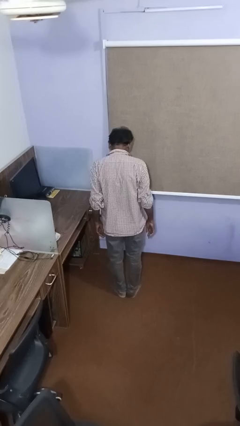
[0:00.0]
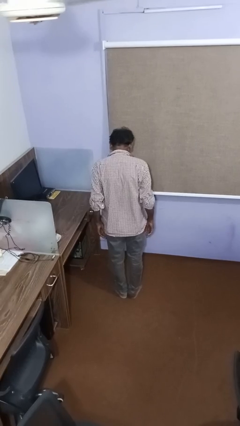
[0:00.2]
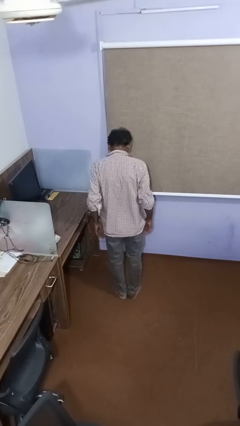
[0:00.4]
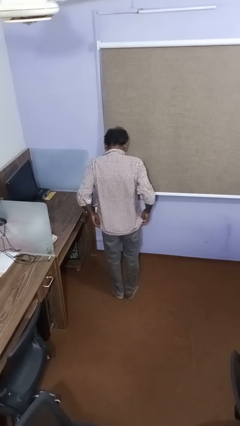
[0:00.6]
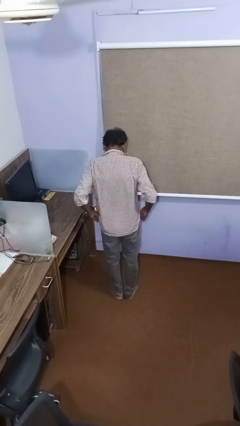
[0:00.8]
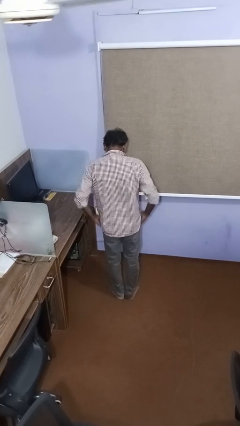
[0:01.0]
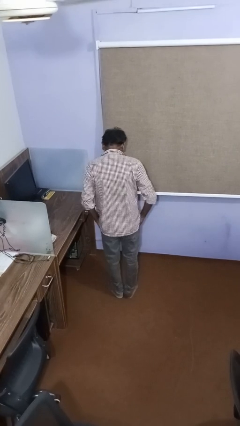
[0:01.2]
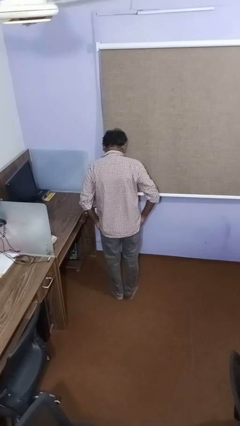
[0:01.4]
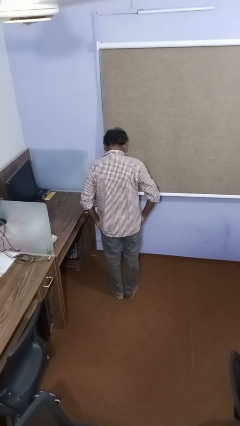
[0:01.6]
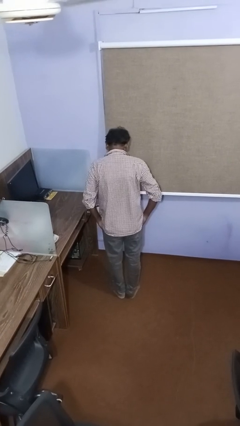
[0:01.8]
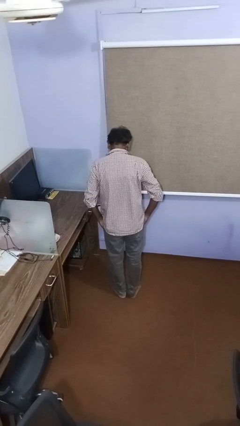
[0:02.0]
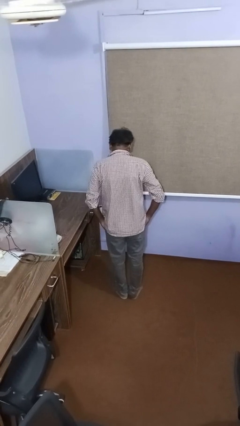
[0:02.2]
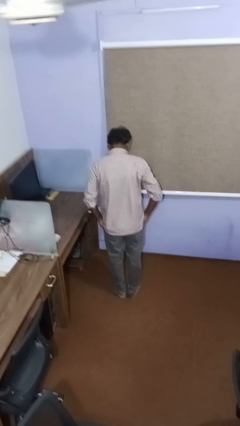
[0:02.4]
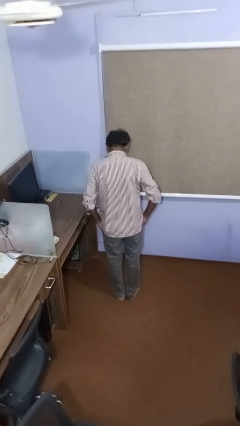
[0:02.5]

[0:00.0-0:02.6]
person puts hands in back pockets

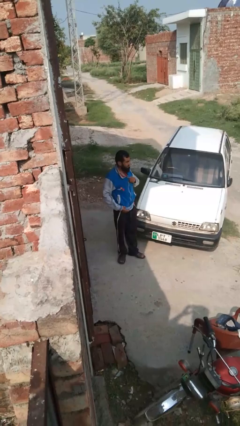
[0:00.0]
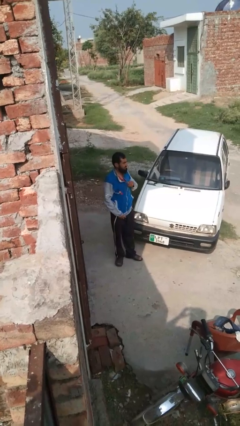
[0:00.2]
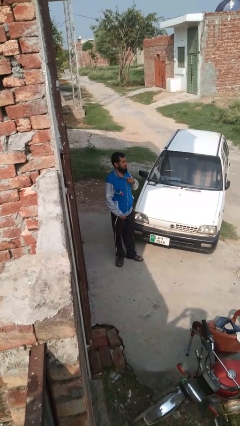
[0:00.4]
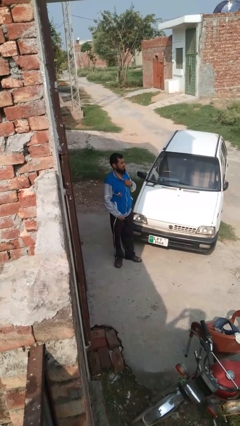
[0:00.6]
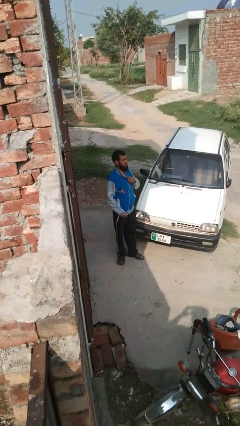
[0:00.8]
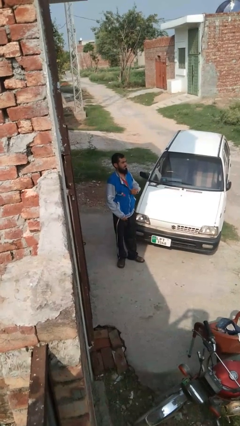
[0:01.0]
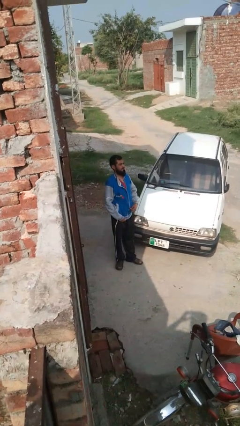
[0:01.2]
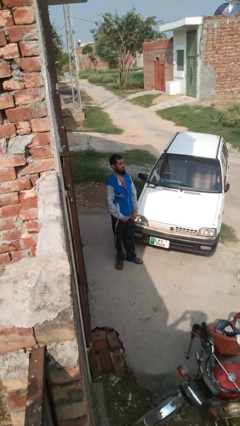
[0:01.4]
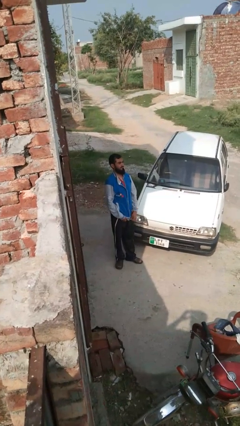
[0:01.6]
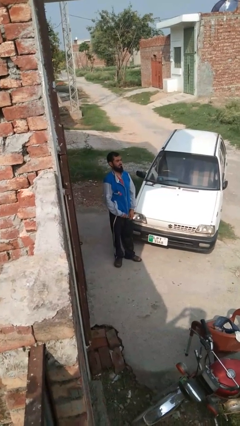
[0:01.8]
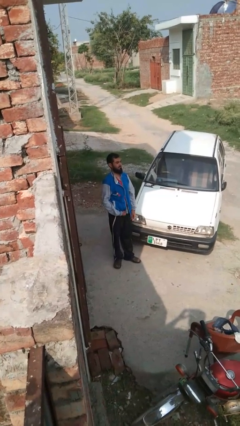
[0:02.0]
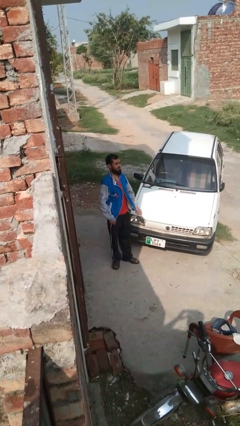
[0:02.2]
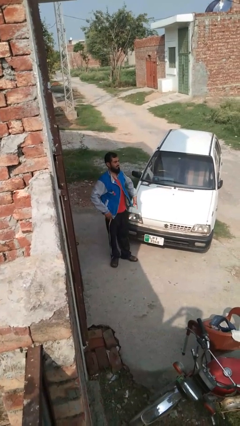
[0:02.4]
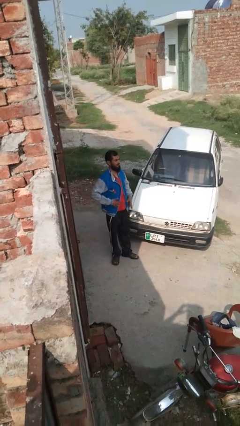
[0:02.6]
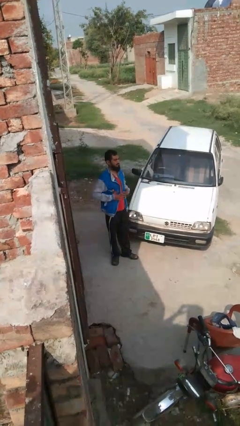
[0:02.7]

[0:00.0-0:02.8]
person unzips jacket

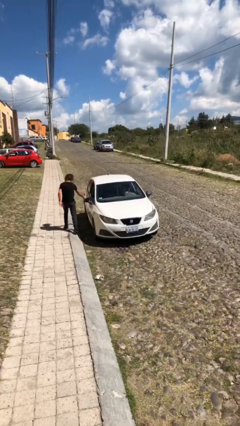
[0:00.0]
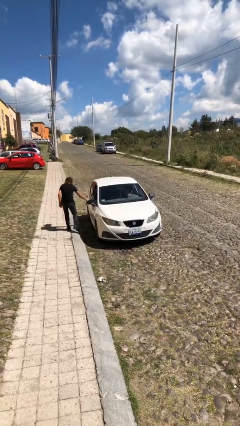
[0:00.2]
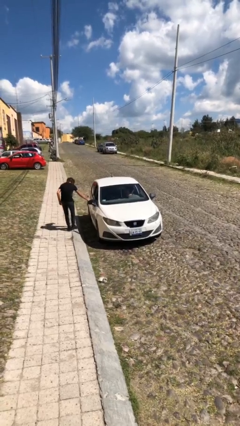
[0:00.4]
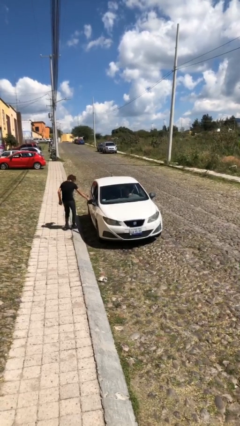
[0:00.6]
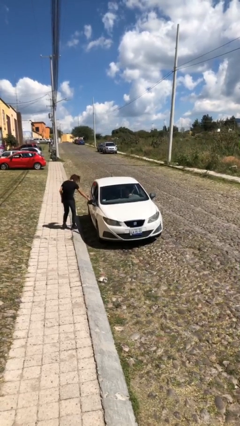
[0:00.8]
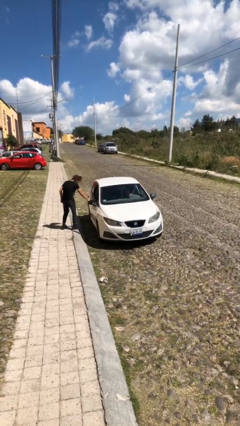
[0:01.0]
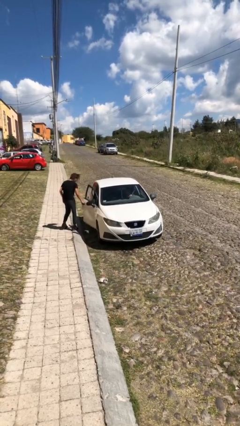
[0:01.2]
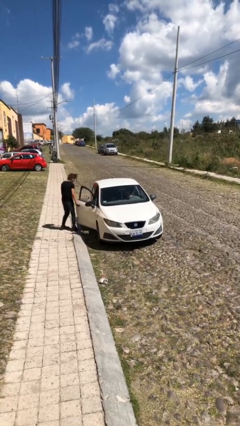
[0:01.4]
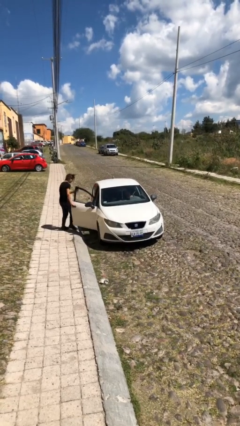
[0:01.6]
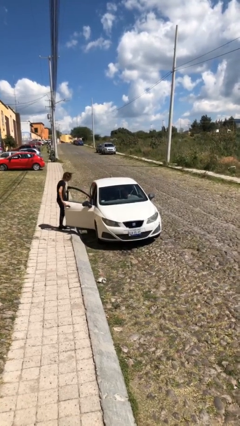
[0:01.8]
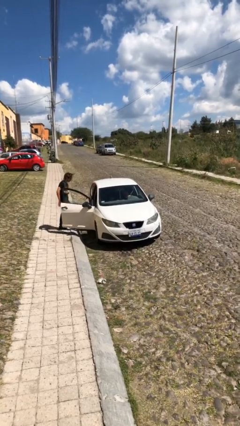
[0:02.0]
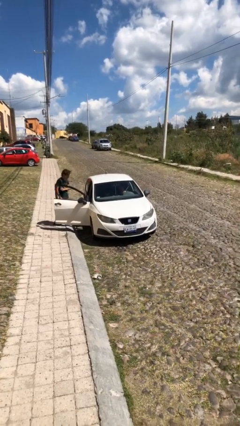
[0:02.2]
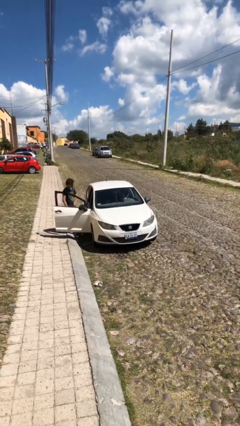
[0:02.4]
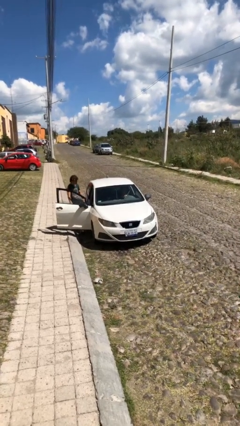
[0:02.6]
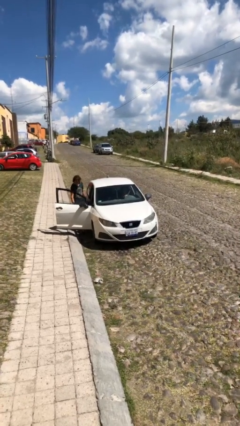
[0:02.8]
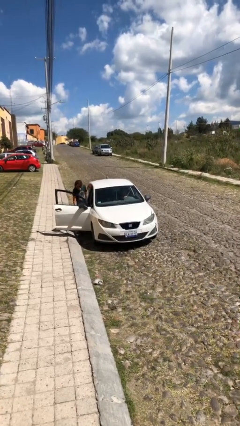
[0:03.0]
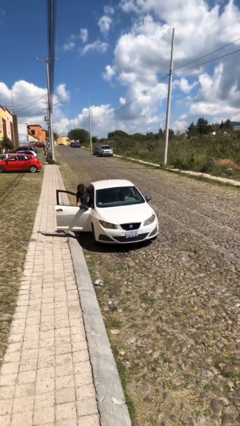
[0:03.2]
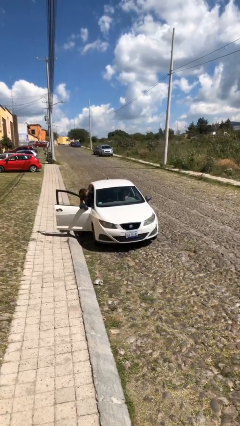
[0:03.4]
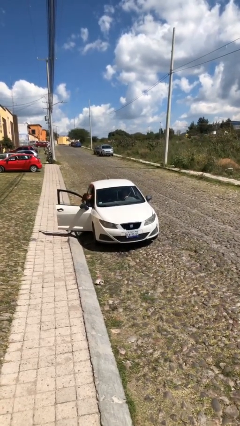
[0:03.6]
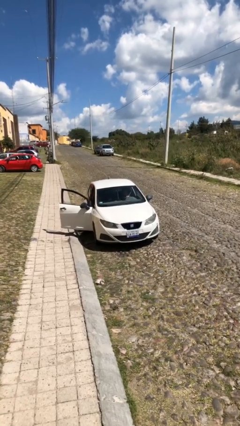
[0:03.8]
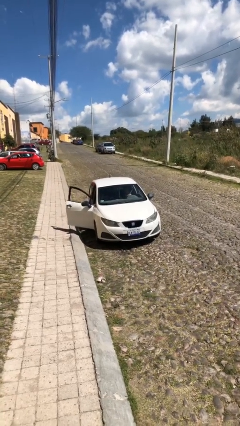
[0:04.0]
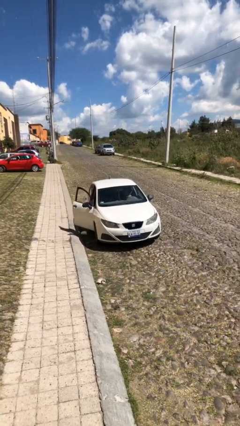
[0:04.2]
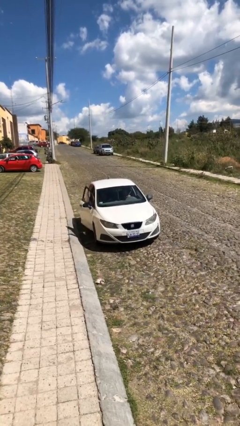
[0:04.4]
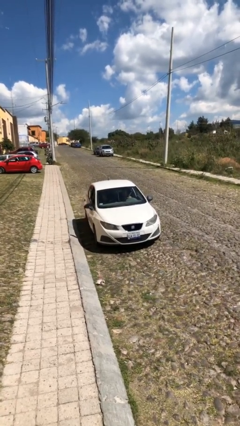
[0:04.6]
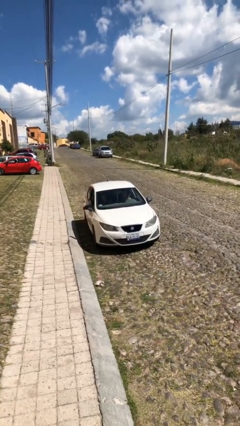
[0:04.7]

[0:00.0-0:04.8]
car picks up person

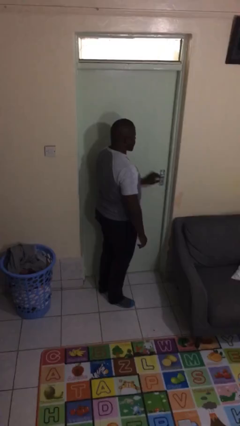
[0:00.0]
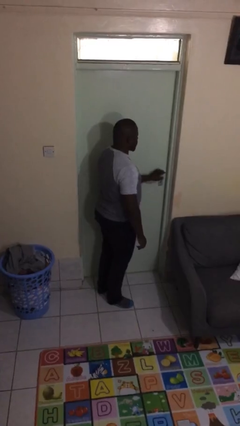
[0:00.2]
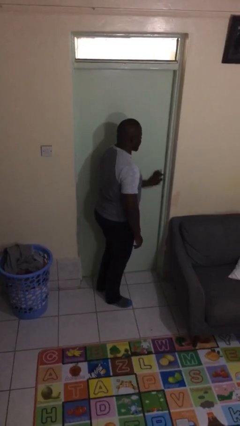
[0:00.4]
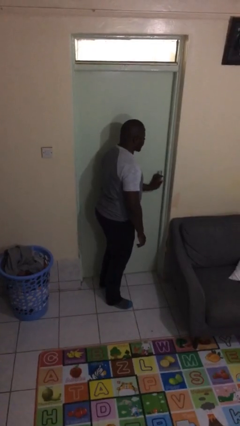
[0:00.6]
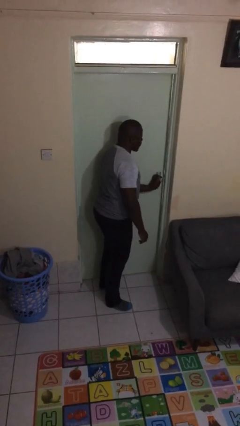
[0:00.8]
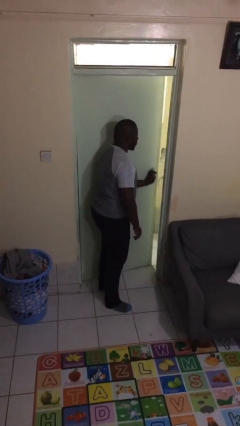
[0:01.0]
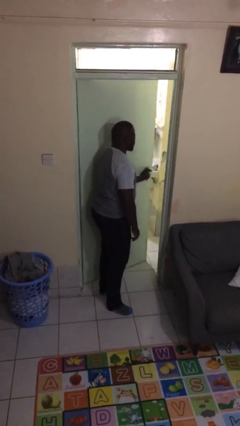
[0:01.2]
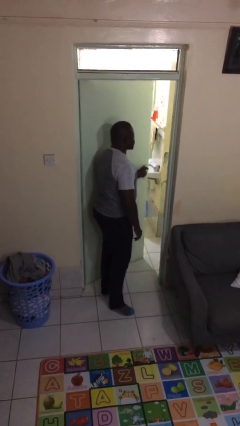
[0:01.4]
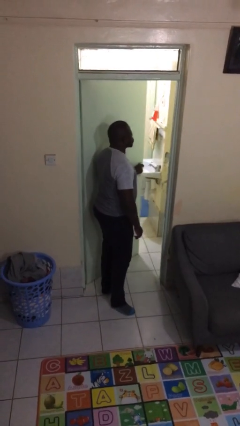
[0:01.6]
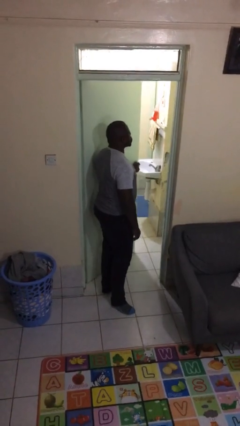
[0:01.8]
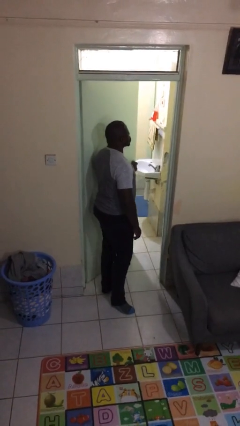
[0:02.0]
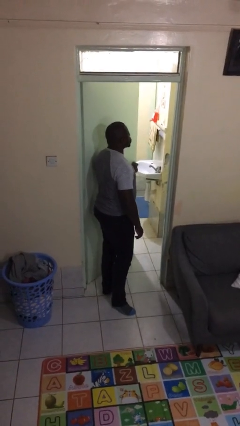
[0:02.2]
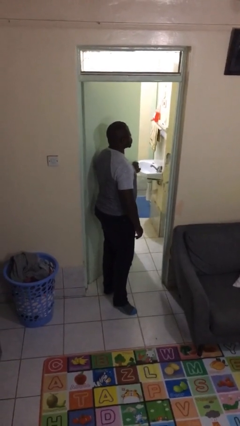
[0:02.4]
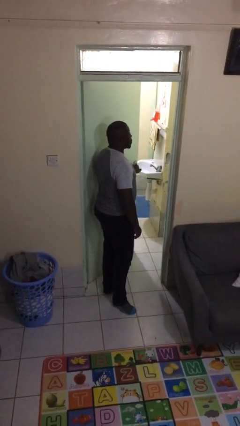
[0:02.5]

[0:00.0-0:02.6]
person opens facility door

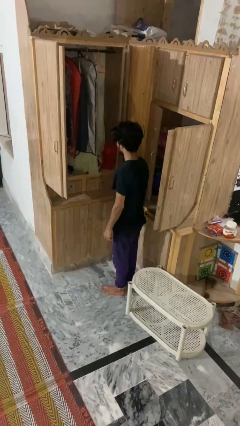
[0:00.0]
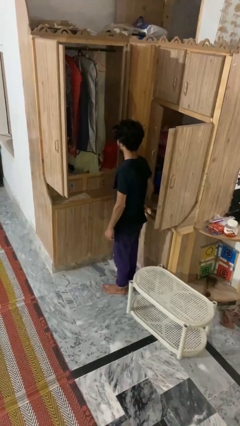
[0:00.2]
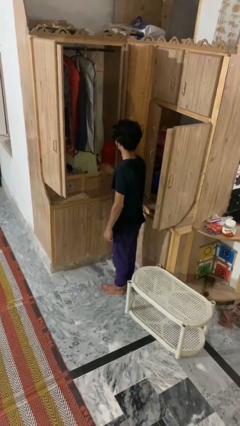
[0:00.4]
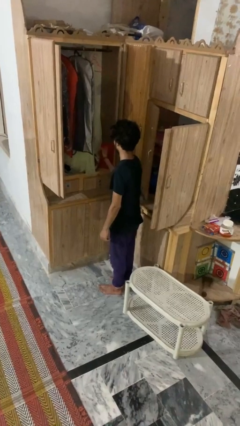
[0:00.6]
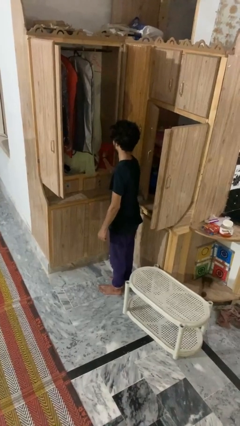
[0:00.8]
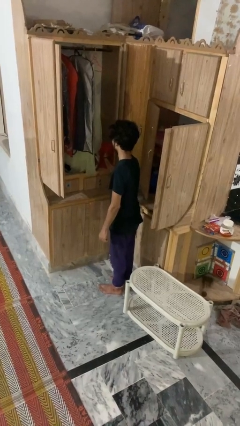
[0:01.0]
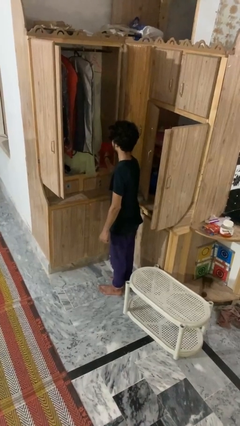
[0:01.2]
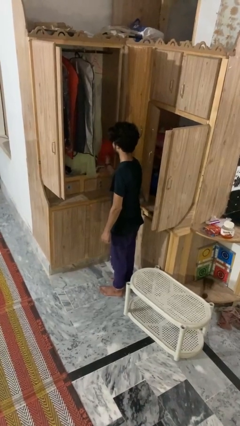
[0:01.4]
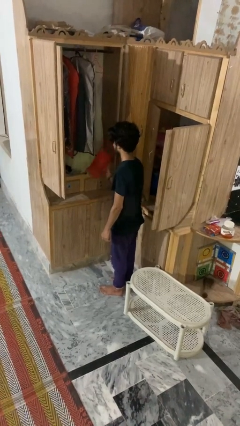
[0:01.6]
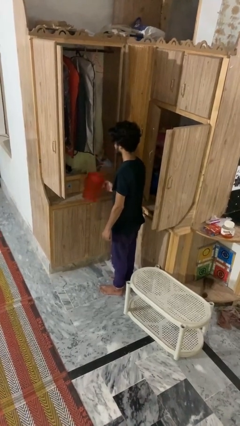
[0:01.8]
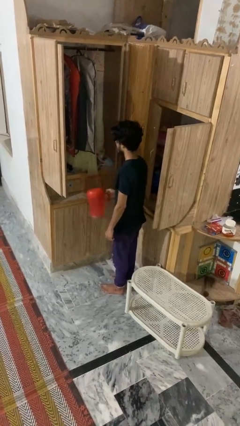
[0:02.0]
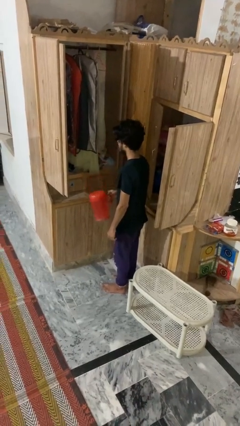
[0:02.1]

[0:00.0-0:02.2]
person picks up object from cabinet

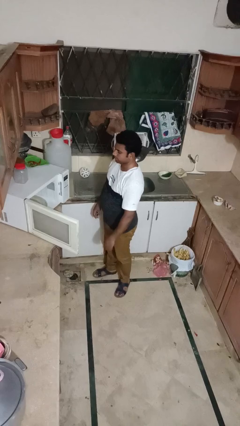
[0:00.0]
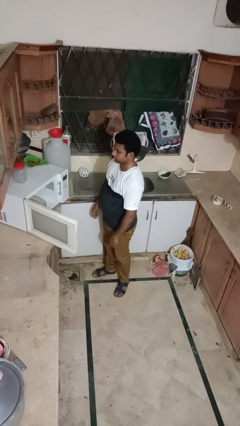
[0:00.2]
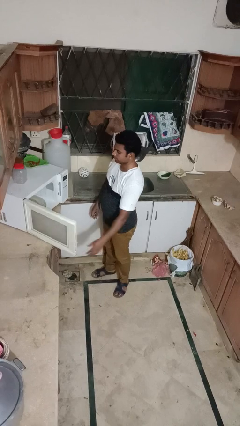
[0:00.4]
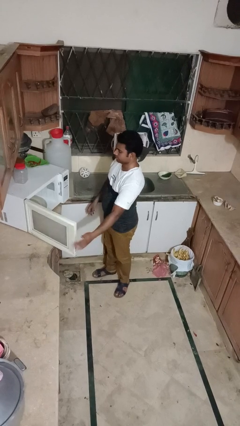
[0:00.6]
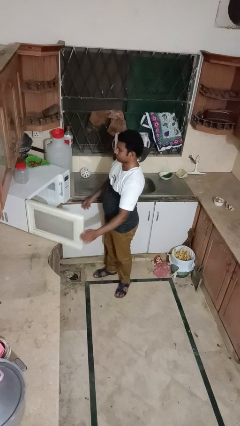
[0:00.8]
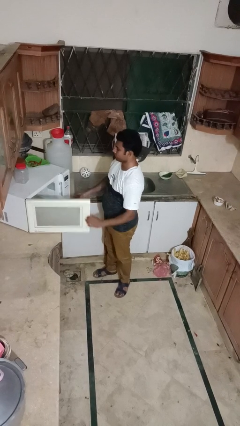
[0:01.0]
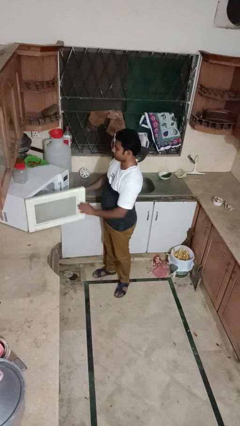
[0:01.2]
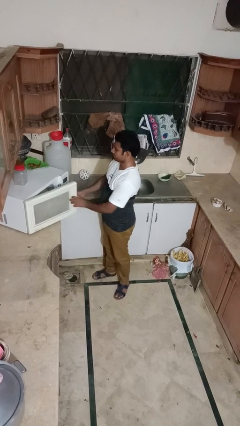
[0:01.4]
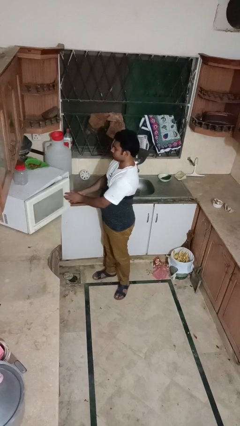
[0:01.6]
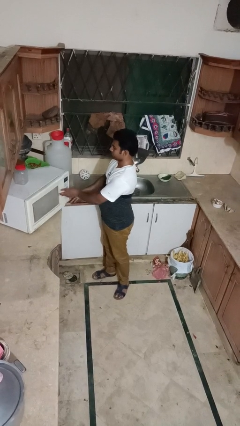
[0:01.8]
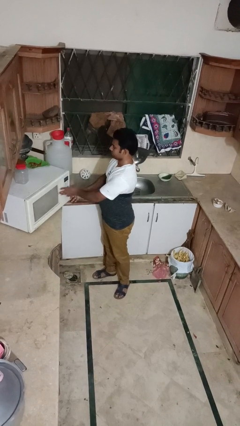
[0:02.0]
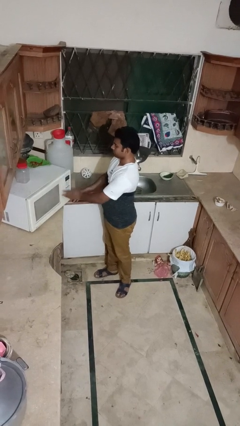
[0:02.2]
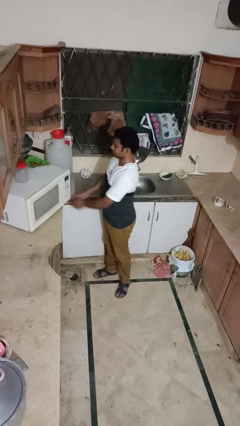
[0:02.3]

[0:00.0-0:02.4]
person closes oven door
